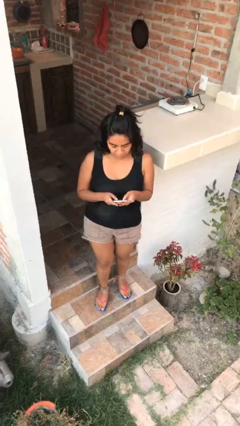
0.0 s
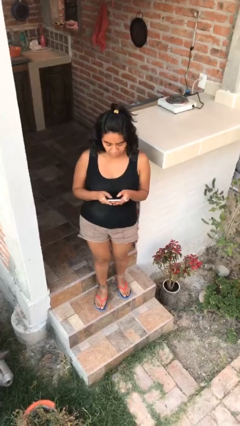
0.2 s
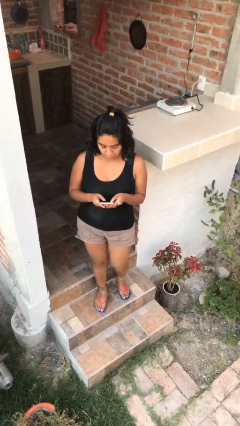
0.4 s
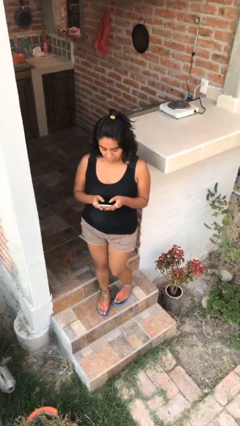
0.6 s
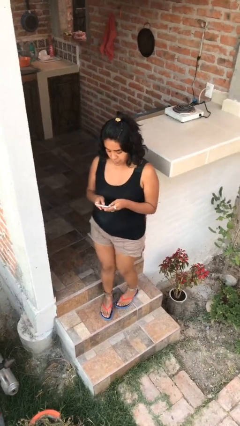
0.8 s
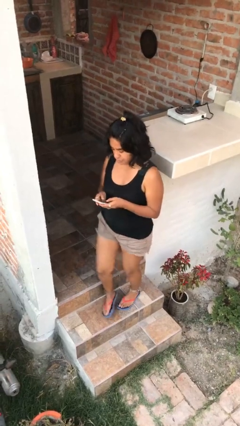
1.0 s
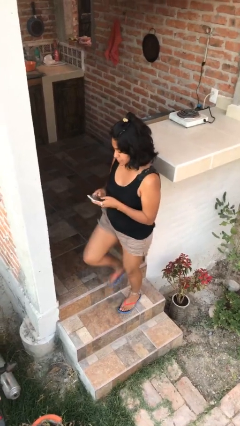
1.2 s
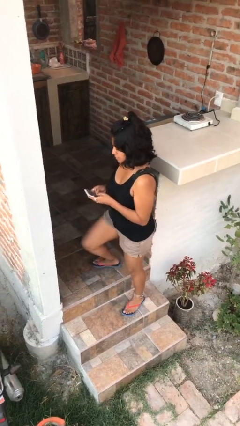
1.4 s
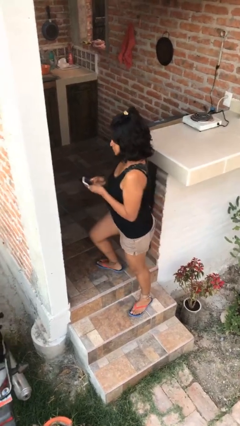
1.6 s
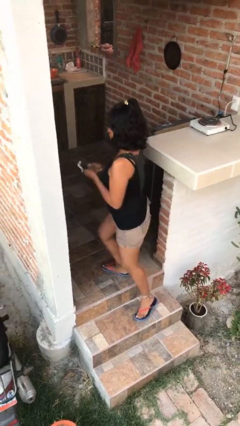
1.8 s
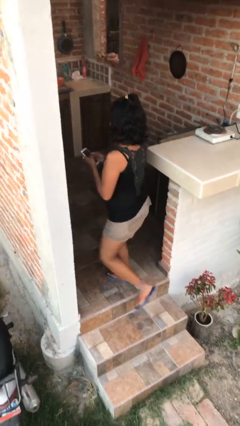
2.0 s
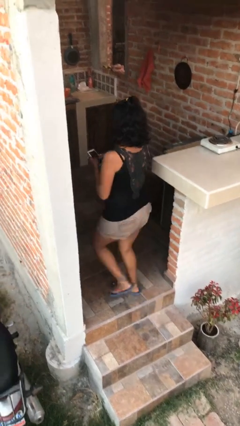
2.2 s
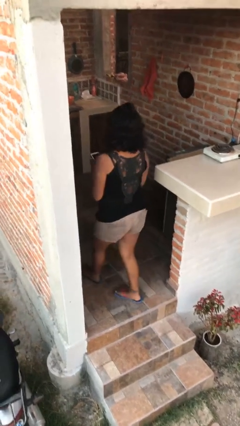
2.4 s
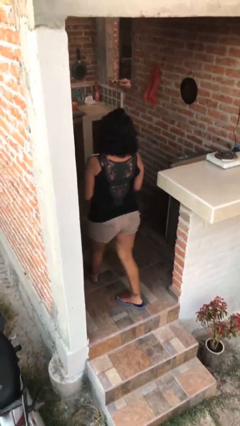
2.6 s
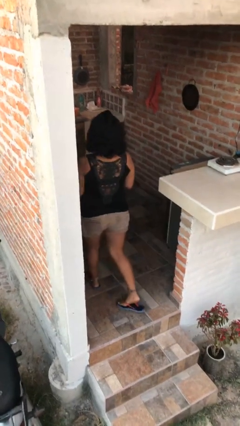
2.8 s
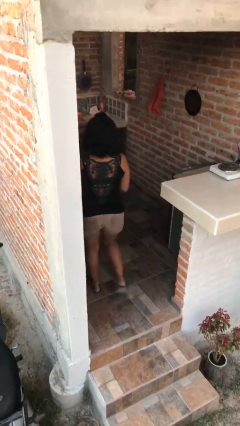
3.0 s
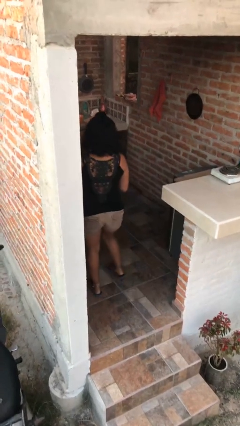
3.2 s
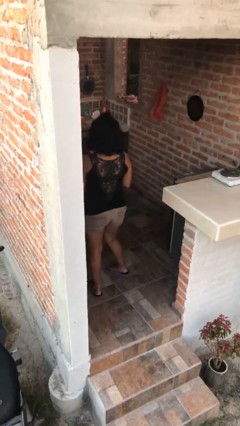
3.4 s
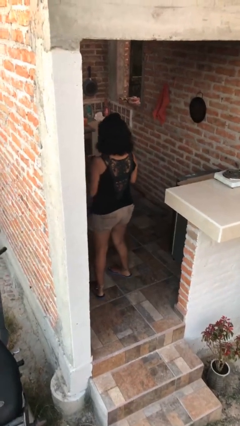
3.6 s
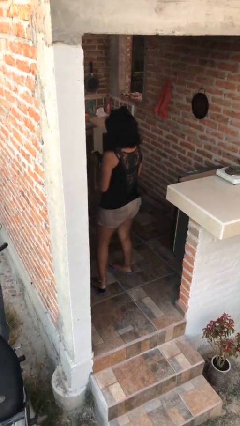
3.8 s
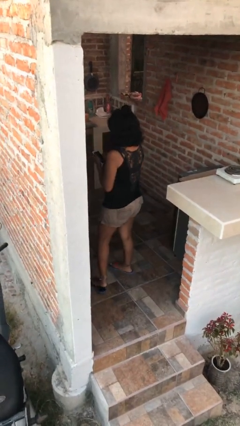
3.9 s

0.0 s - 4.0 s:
person exits scene through structure

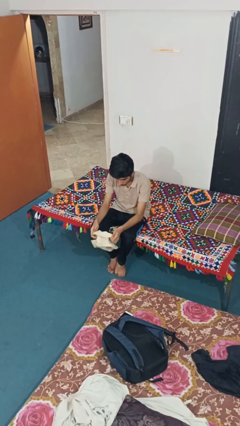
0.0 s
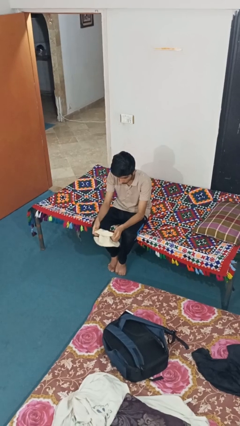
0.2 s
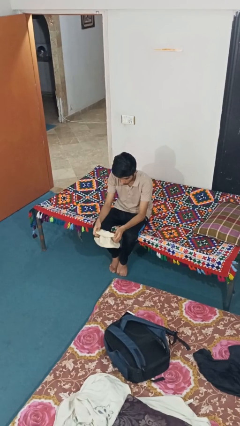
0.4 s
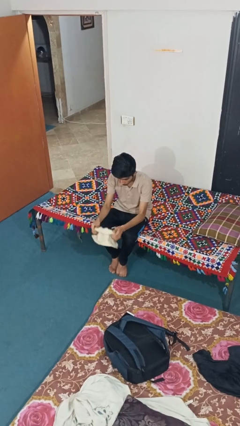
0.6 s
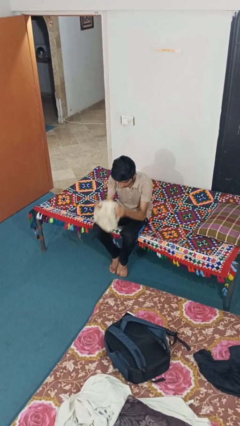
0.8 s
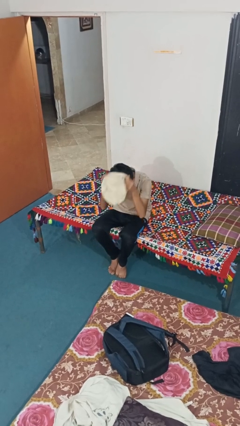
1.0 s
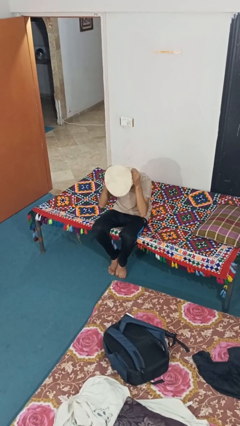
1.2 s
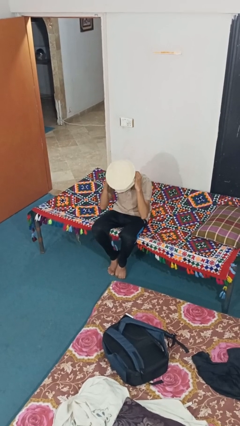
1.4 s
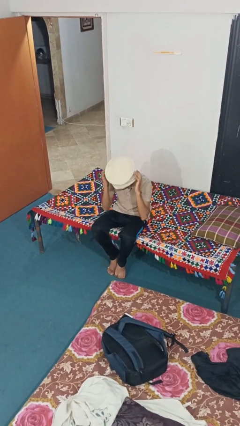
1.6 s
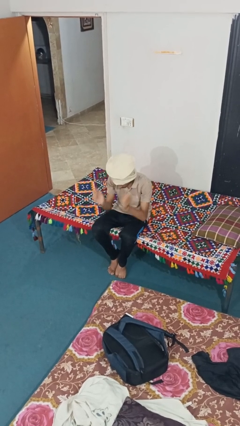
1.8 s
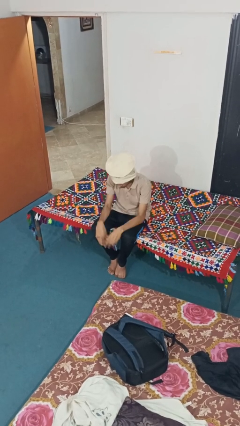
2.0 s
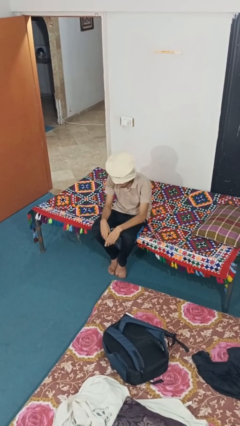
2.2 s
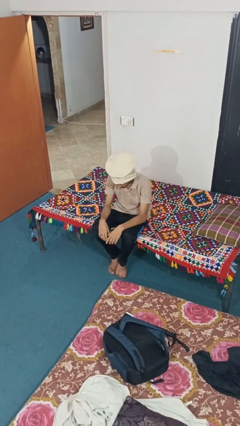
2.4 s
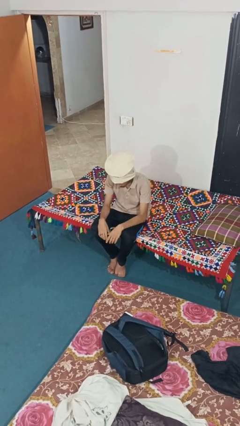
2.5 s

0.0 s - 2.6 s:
person puts on hat

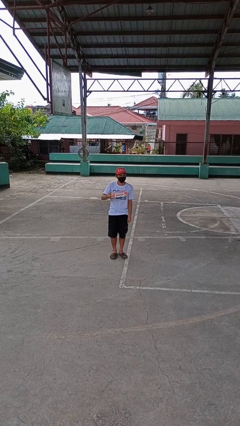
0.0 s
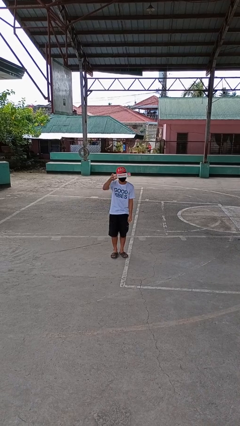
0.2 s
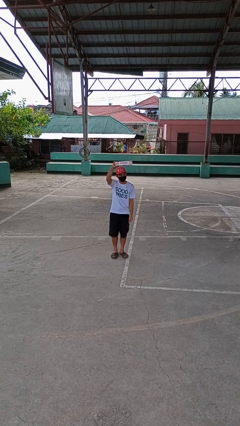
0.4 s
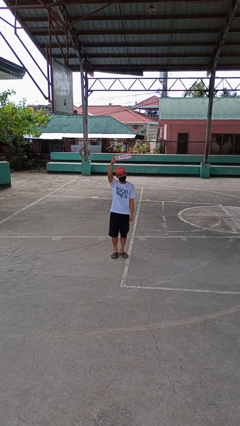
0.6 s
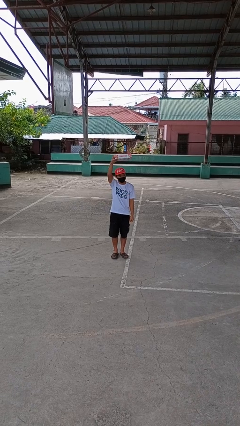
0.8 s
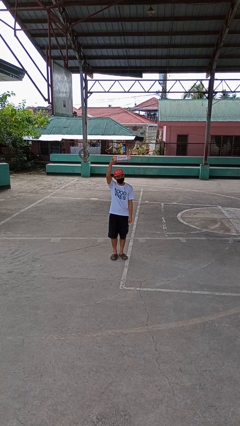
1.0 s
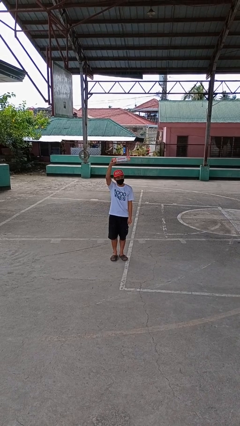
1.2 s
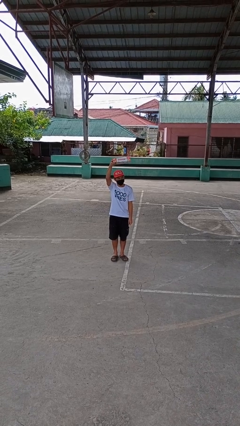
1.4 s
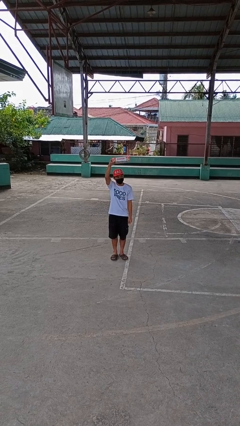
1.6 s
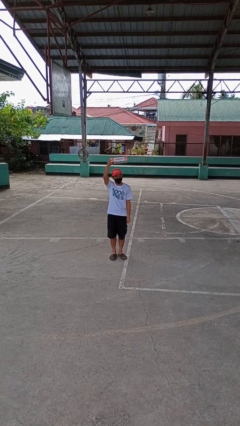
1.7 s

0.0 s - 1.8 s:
person holds object above head

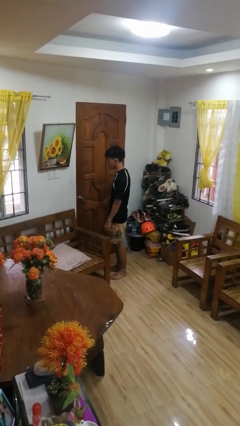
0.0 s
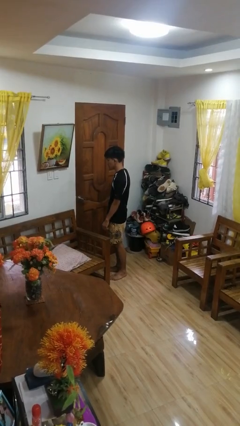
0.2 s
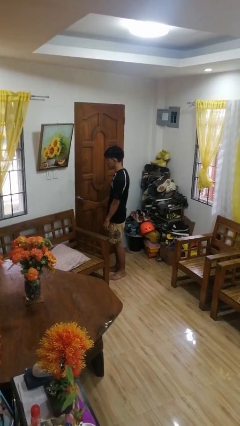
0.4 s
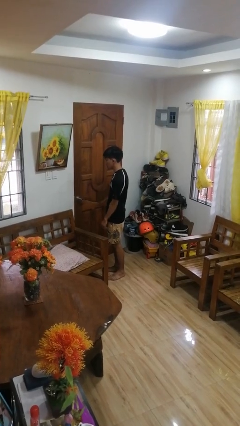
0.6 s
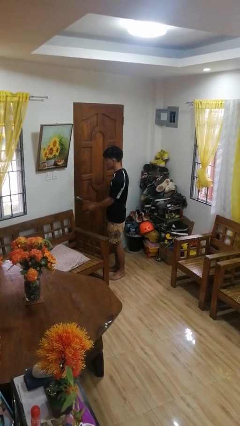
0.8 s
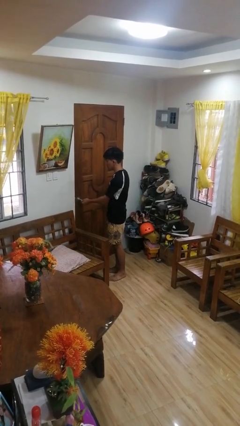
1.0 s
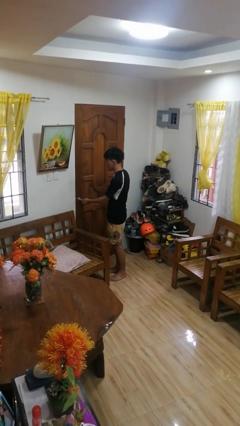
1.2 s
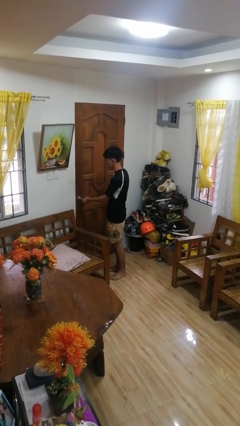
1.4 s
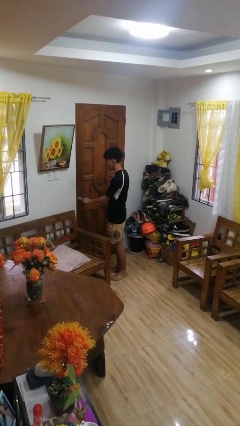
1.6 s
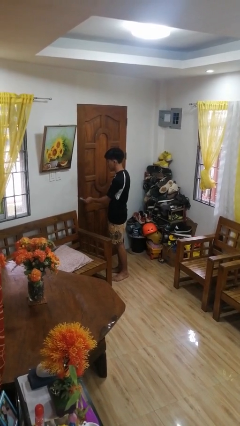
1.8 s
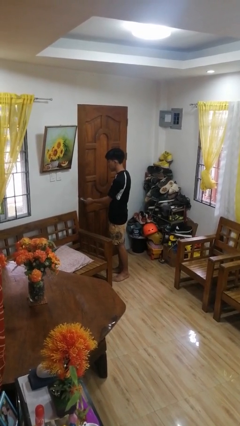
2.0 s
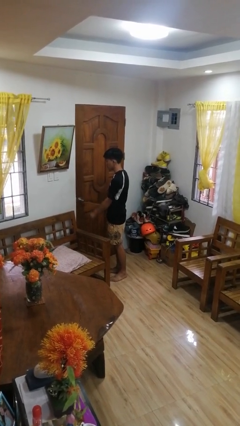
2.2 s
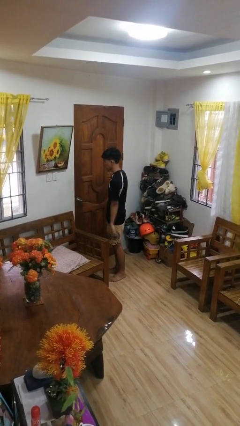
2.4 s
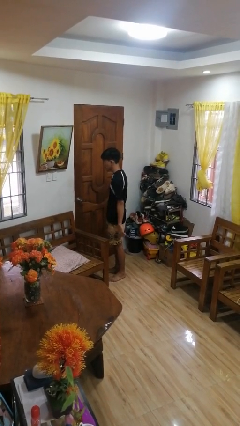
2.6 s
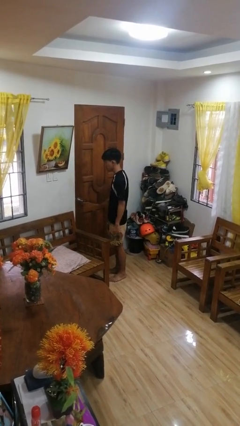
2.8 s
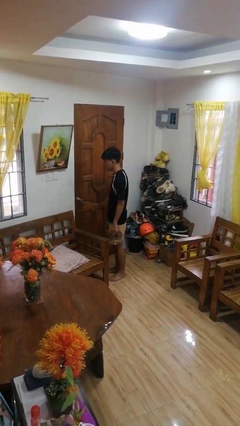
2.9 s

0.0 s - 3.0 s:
person locks door with keys

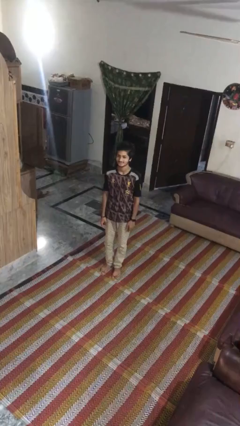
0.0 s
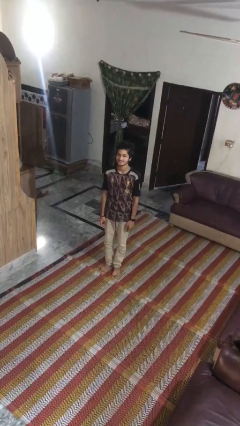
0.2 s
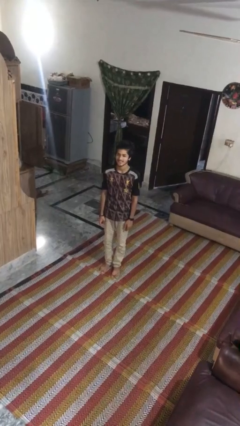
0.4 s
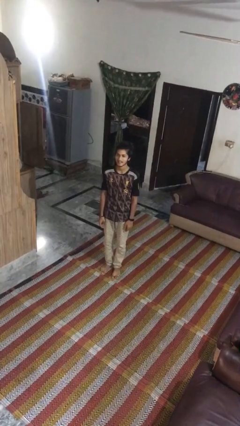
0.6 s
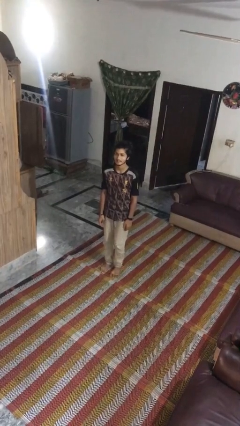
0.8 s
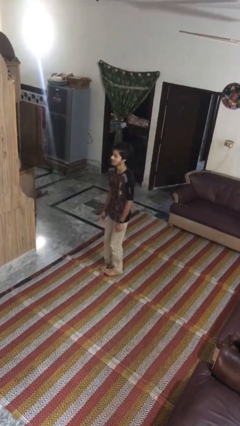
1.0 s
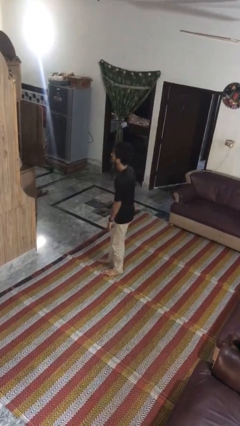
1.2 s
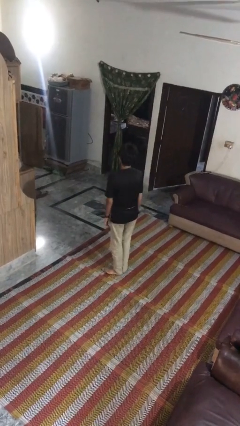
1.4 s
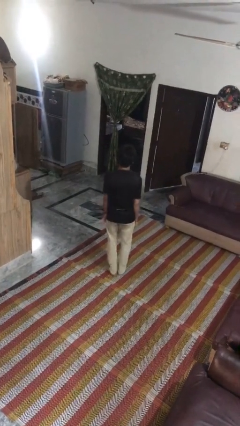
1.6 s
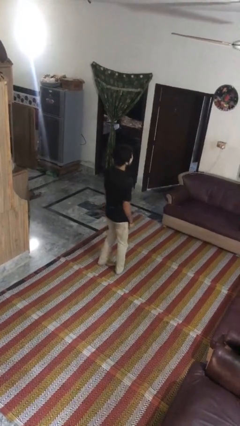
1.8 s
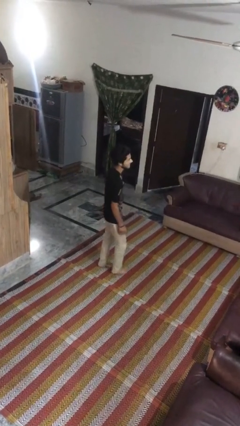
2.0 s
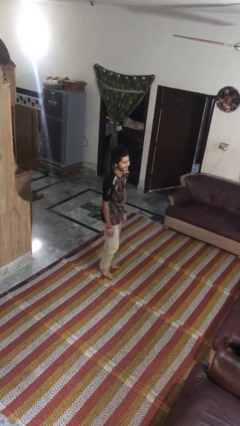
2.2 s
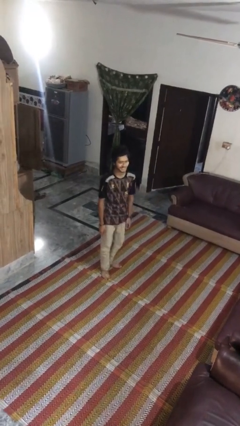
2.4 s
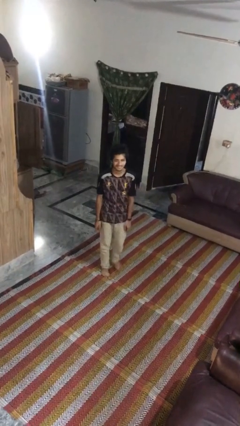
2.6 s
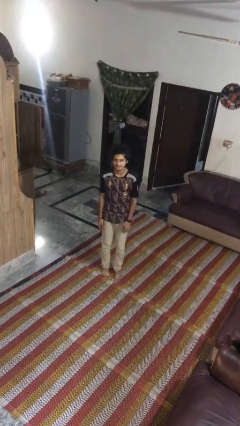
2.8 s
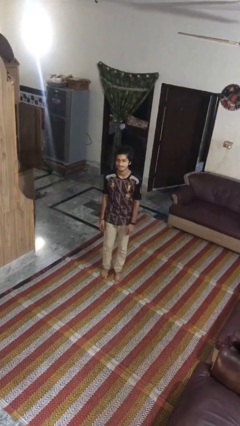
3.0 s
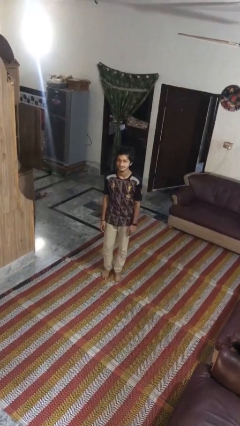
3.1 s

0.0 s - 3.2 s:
person twirls

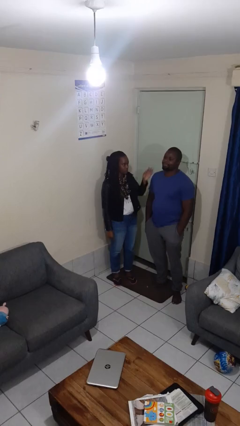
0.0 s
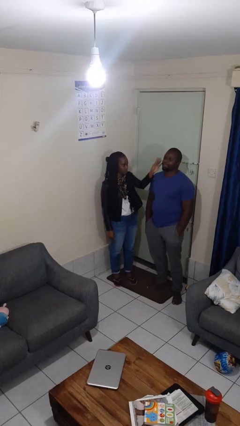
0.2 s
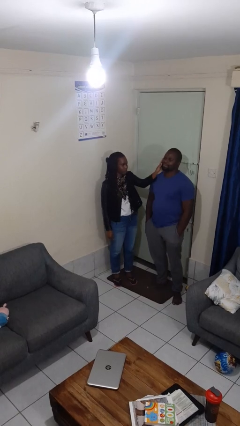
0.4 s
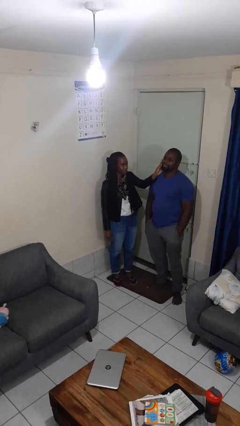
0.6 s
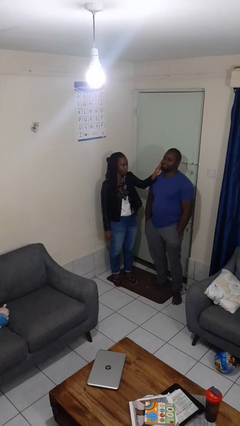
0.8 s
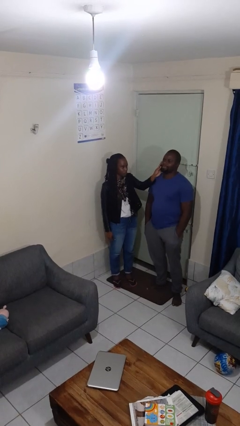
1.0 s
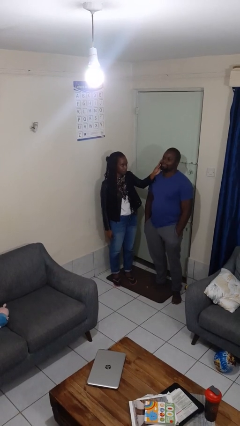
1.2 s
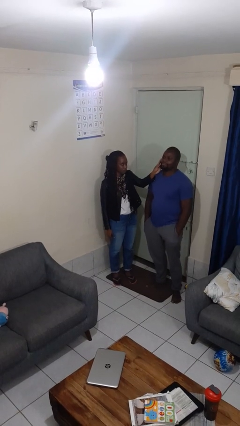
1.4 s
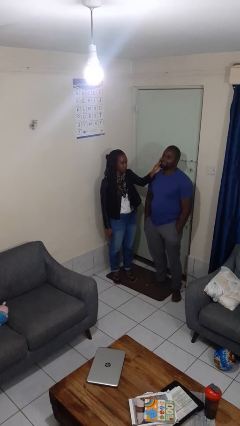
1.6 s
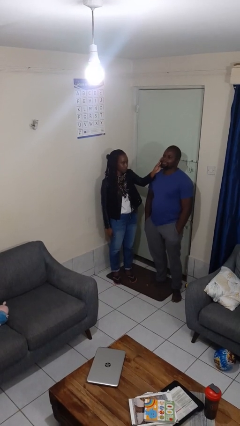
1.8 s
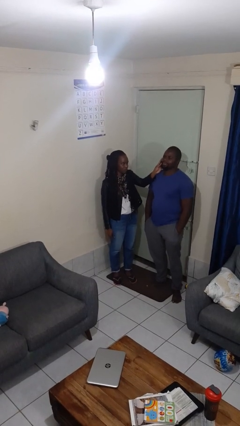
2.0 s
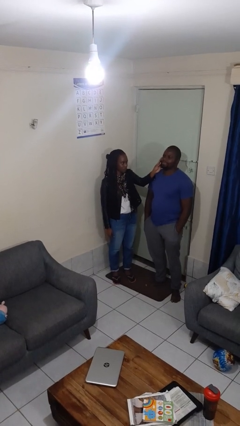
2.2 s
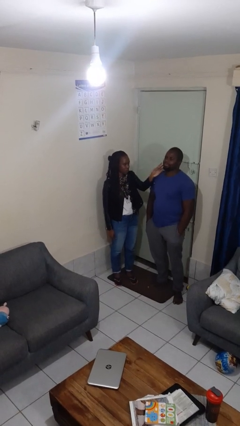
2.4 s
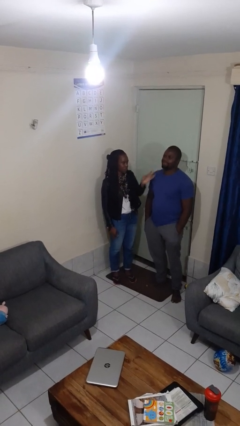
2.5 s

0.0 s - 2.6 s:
person touches face of person
